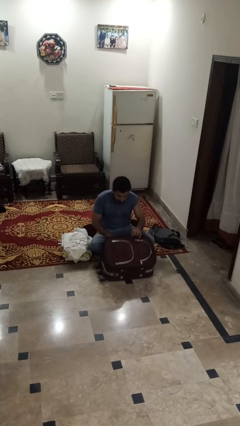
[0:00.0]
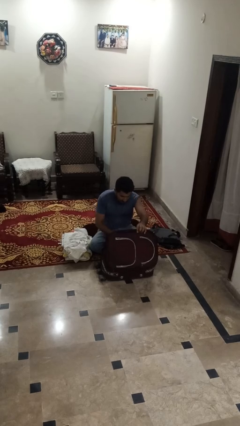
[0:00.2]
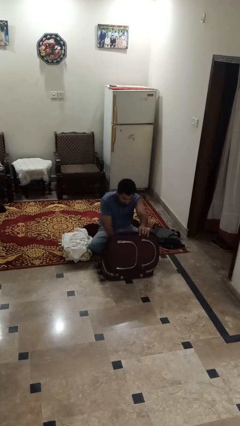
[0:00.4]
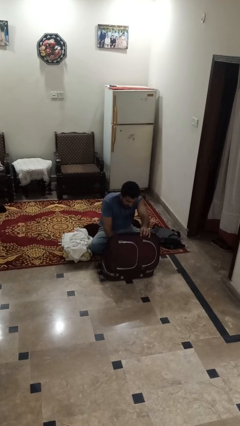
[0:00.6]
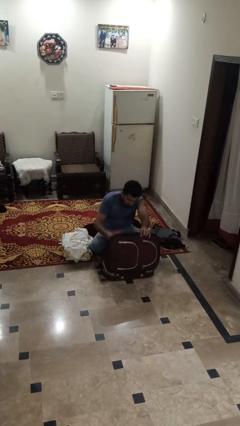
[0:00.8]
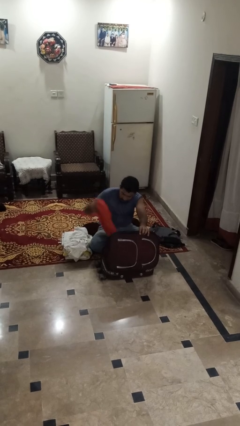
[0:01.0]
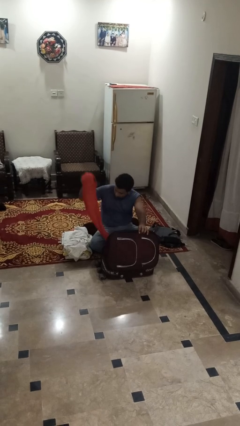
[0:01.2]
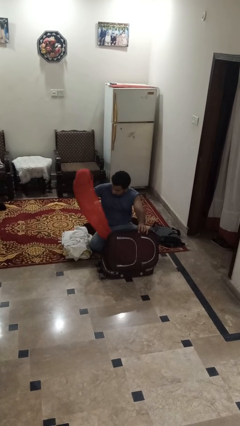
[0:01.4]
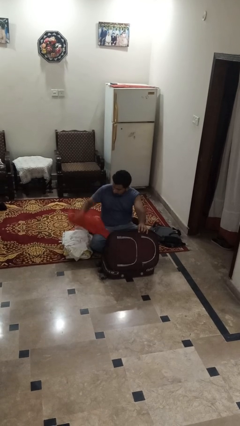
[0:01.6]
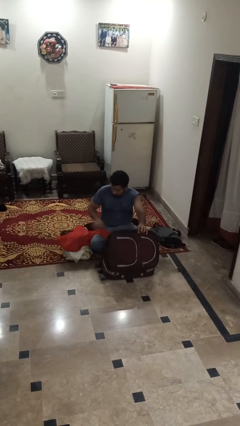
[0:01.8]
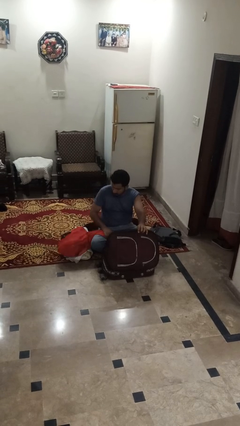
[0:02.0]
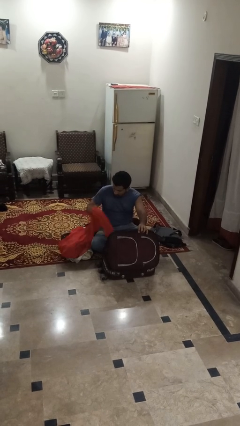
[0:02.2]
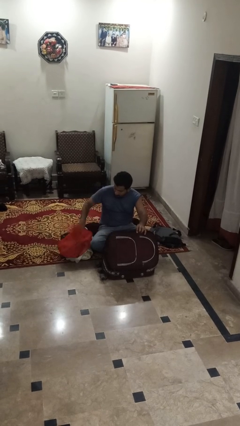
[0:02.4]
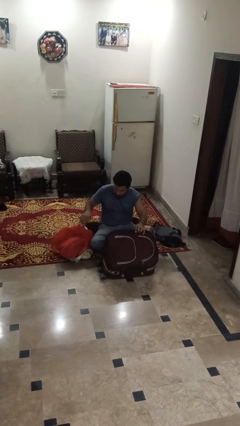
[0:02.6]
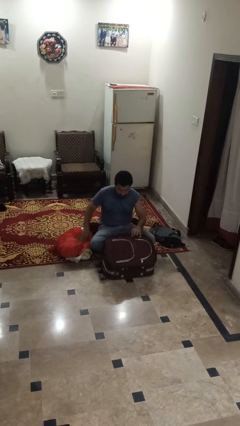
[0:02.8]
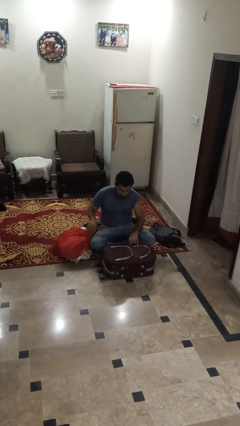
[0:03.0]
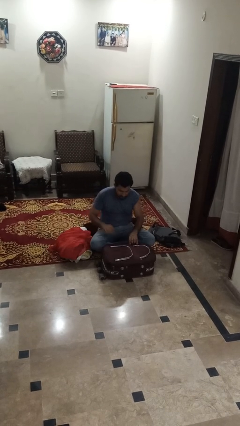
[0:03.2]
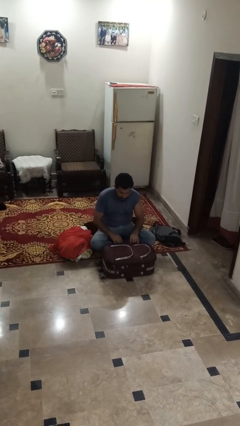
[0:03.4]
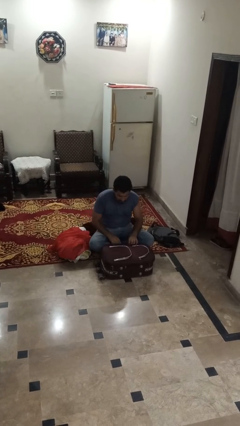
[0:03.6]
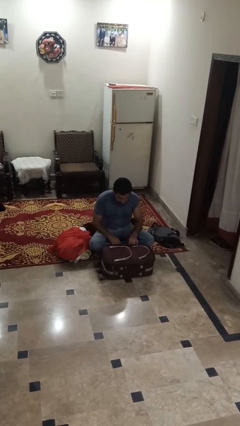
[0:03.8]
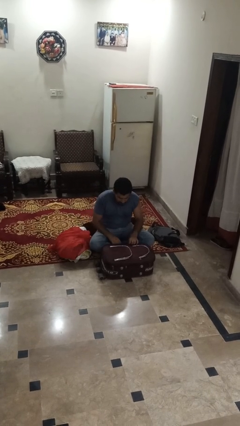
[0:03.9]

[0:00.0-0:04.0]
person unloads clothes from suitcase

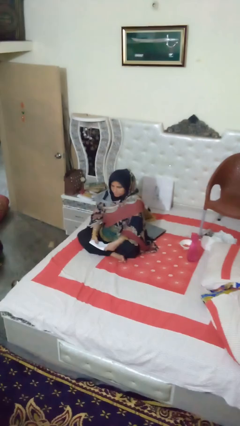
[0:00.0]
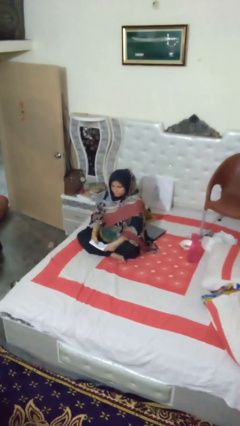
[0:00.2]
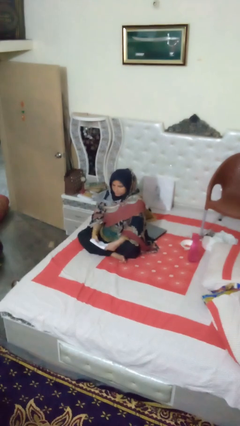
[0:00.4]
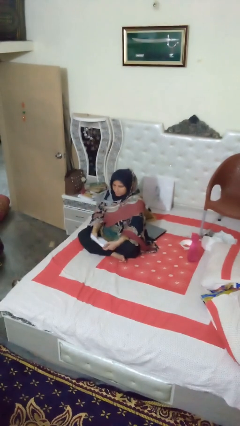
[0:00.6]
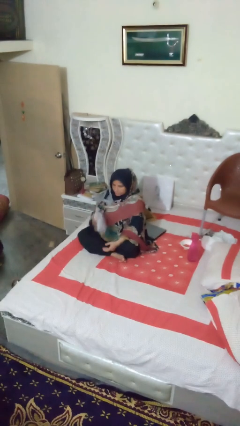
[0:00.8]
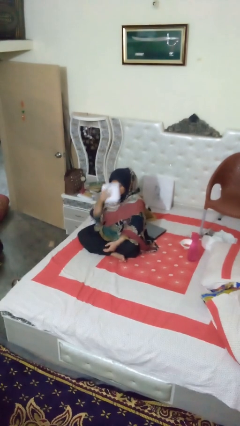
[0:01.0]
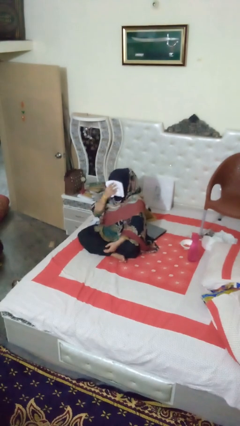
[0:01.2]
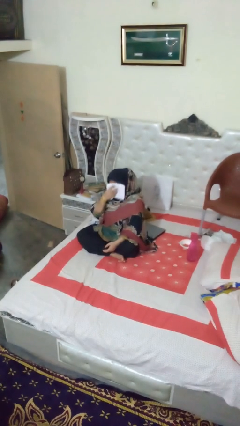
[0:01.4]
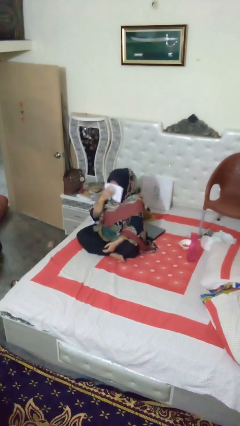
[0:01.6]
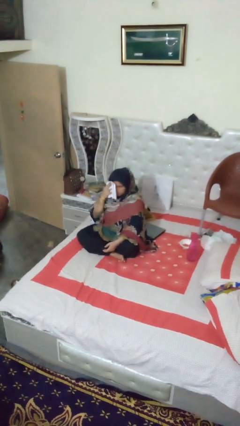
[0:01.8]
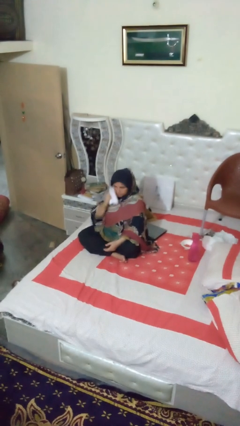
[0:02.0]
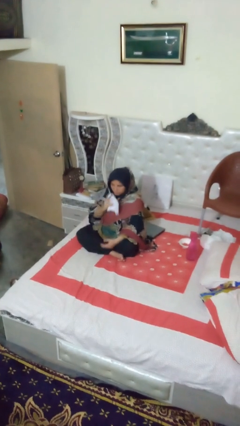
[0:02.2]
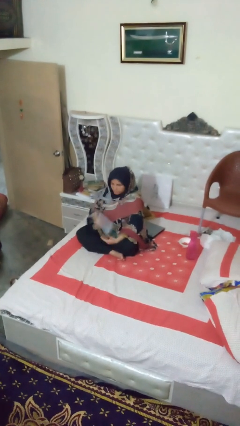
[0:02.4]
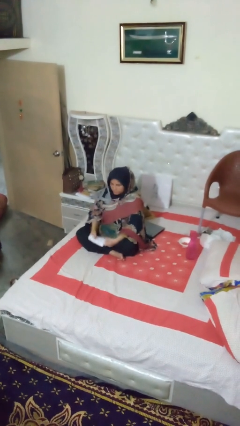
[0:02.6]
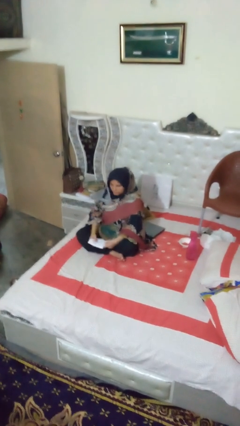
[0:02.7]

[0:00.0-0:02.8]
person wipes mouth with napkin

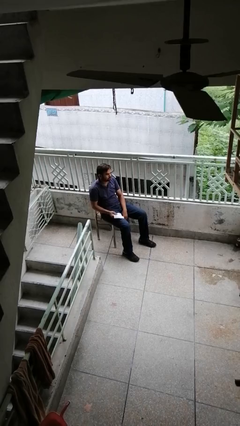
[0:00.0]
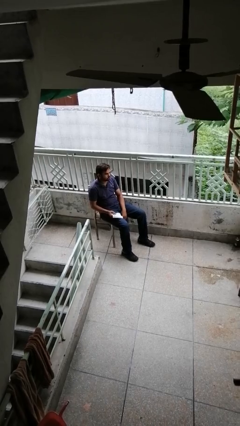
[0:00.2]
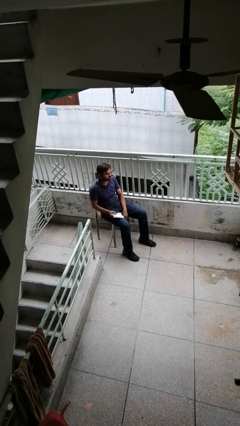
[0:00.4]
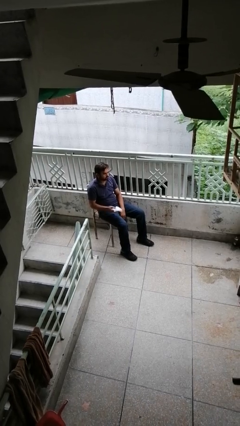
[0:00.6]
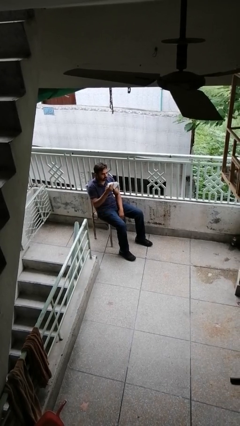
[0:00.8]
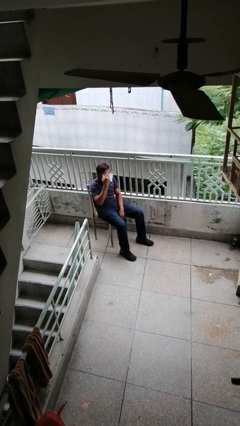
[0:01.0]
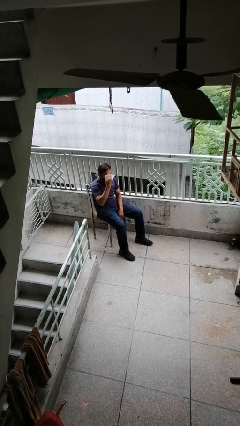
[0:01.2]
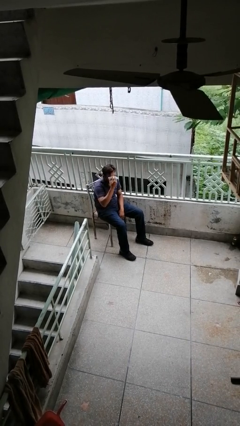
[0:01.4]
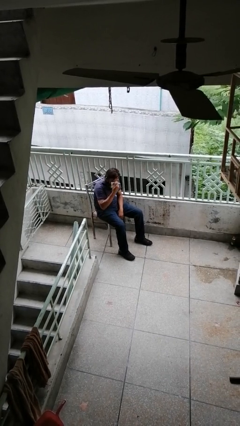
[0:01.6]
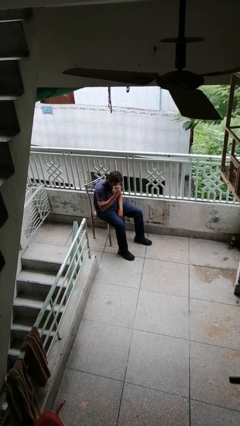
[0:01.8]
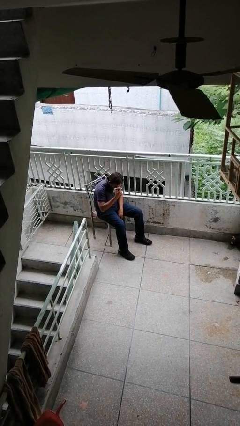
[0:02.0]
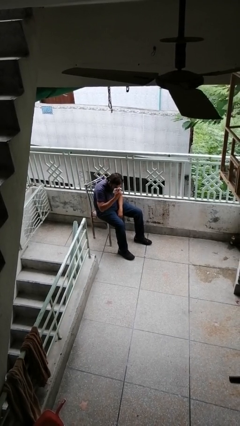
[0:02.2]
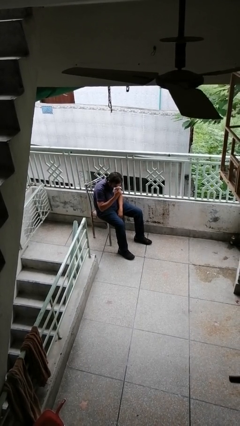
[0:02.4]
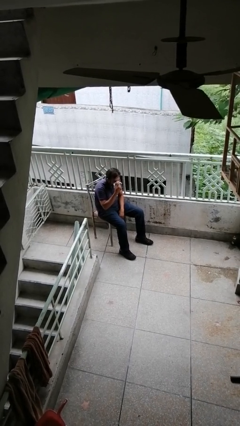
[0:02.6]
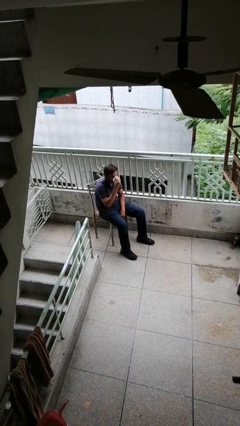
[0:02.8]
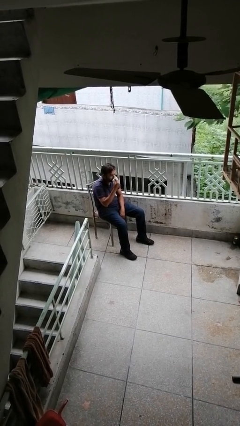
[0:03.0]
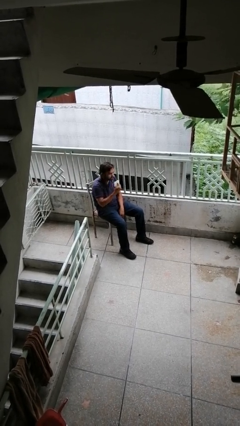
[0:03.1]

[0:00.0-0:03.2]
person blows nose

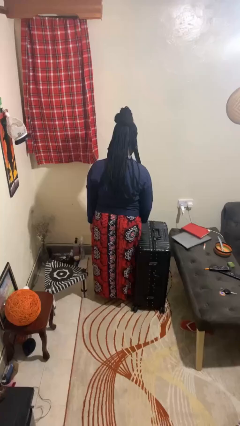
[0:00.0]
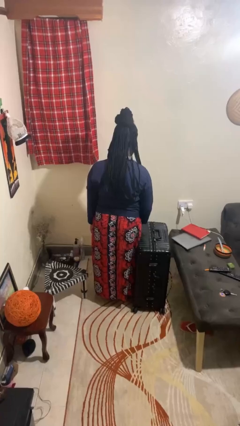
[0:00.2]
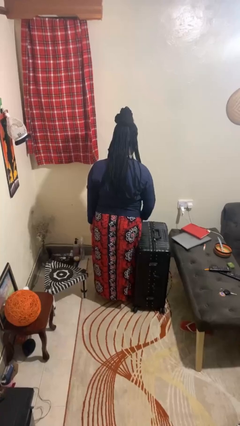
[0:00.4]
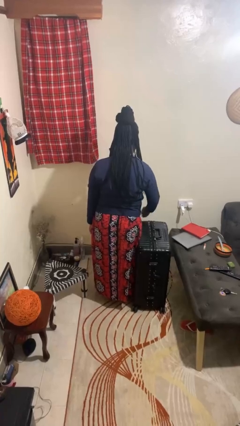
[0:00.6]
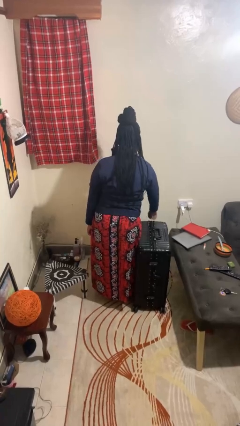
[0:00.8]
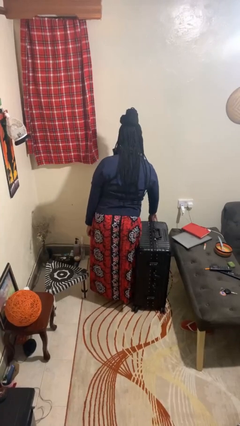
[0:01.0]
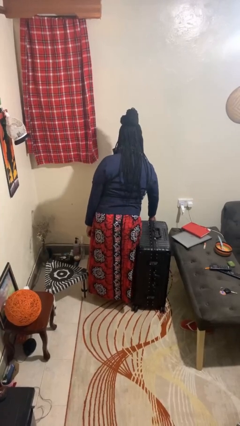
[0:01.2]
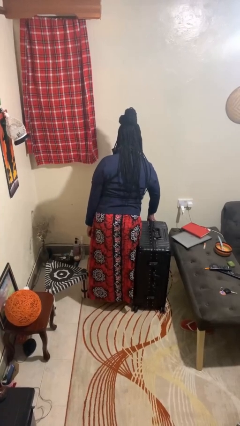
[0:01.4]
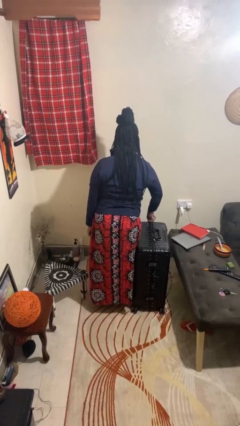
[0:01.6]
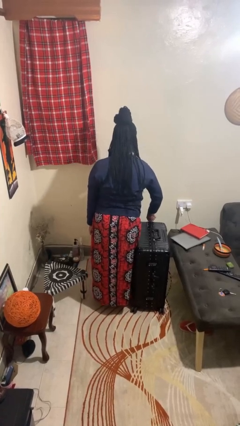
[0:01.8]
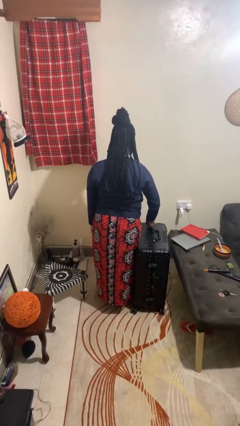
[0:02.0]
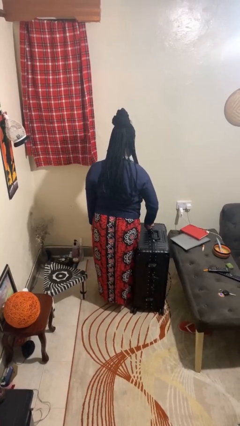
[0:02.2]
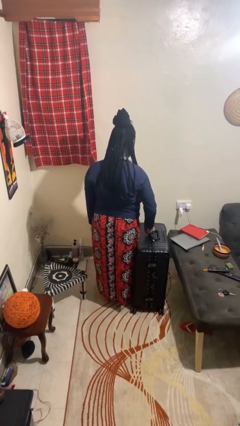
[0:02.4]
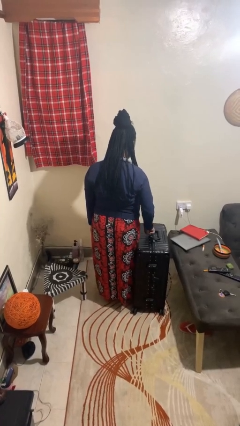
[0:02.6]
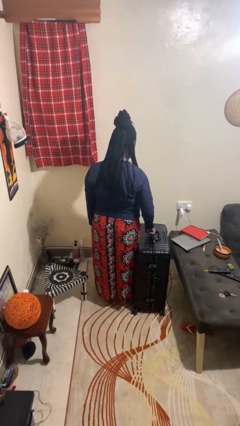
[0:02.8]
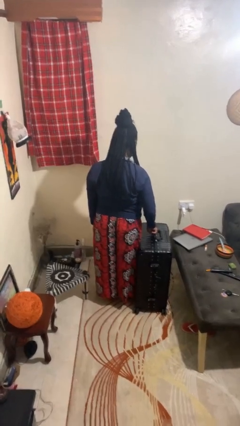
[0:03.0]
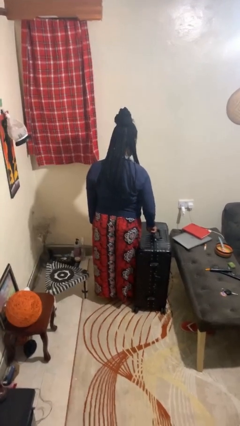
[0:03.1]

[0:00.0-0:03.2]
person opens suitcase

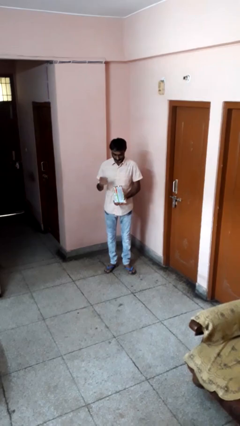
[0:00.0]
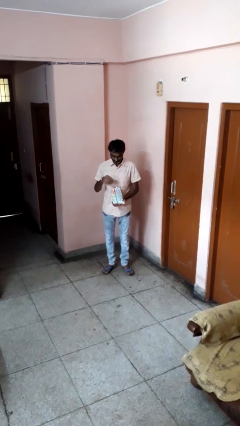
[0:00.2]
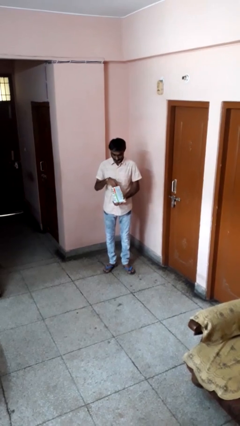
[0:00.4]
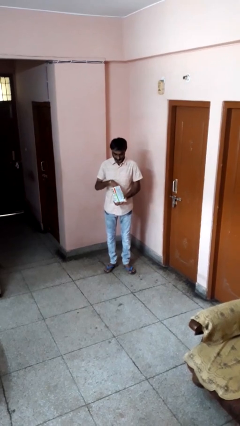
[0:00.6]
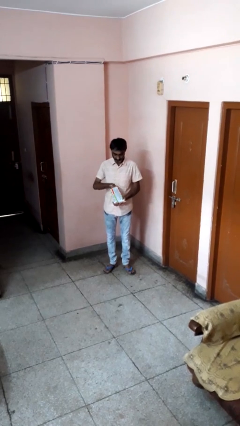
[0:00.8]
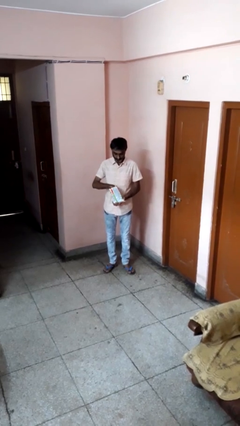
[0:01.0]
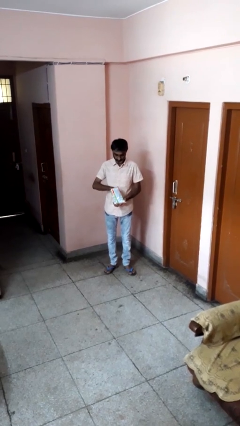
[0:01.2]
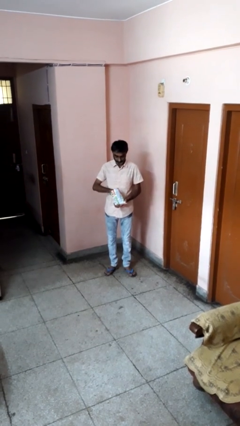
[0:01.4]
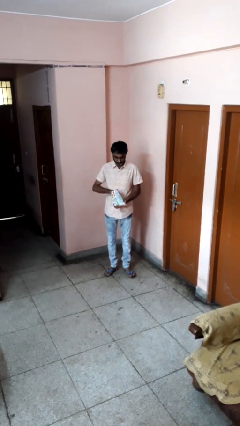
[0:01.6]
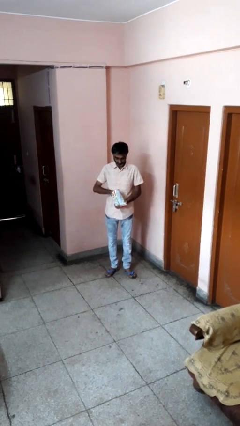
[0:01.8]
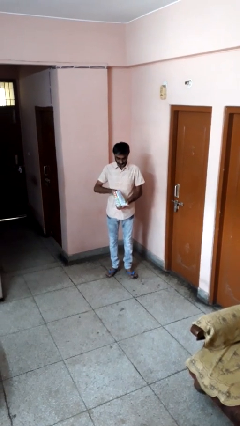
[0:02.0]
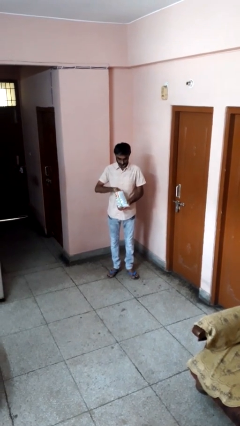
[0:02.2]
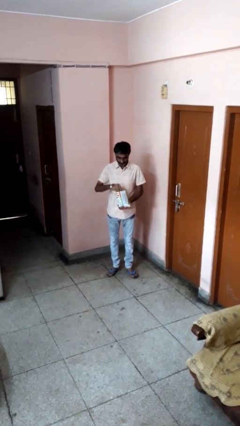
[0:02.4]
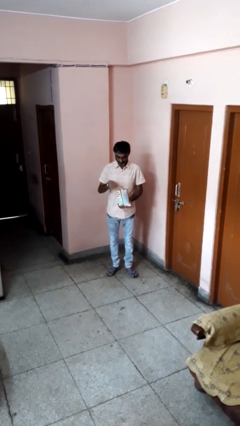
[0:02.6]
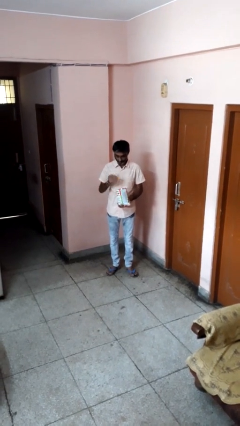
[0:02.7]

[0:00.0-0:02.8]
person eats snack from bag

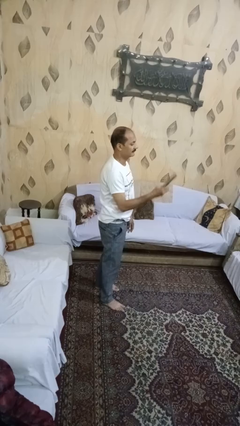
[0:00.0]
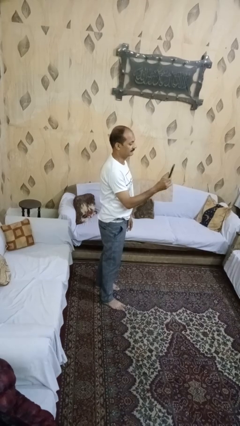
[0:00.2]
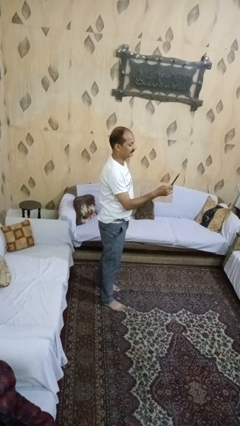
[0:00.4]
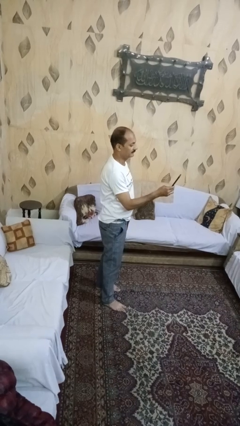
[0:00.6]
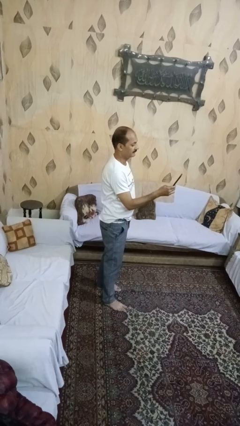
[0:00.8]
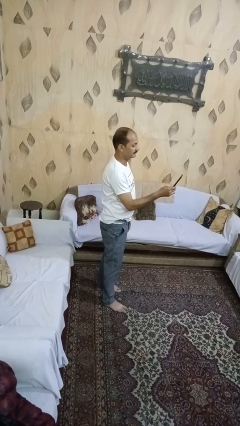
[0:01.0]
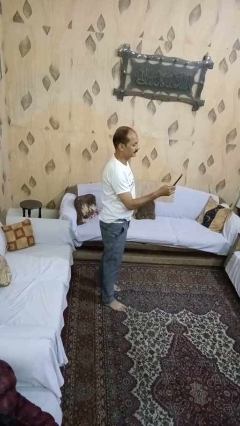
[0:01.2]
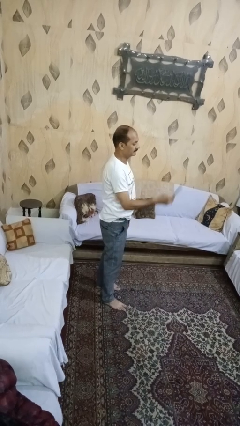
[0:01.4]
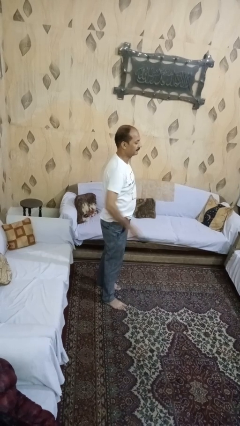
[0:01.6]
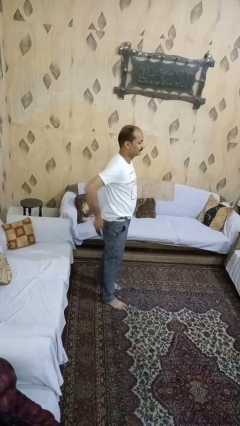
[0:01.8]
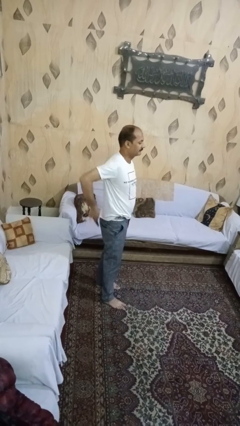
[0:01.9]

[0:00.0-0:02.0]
person takes phone from pocket
